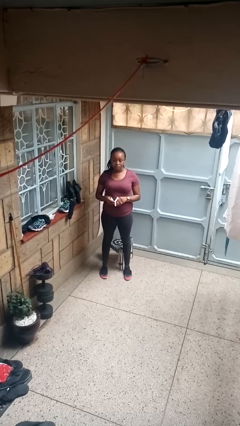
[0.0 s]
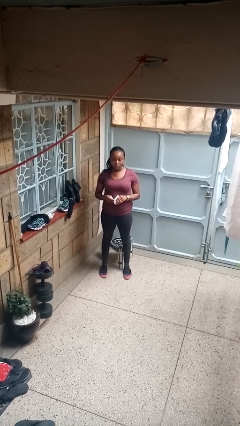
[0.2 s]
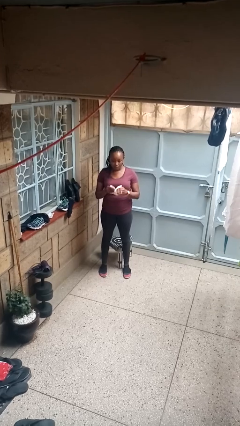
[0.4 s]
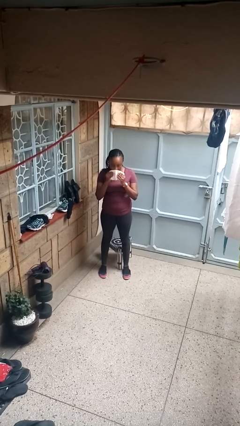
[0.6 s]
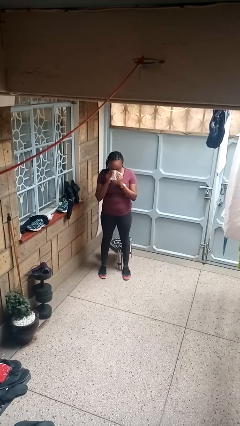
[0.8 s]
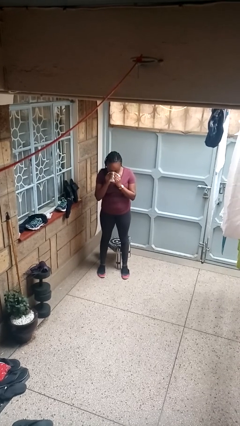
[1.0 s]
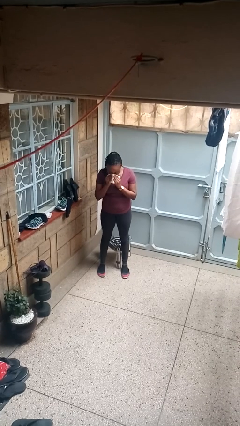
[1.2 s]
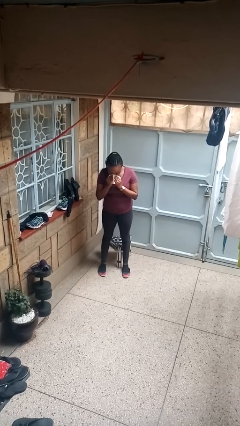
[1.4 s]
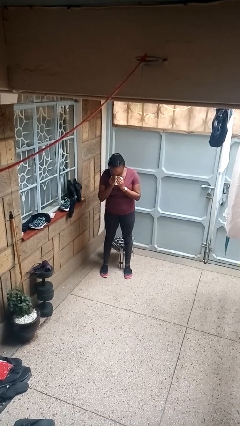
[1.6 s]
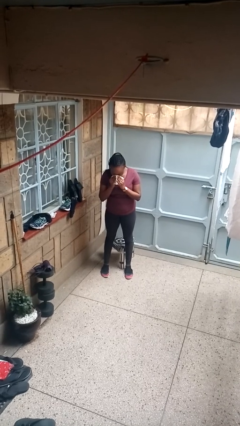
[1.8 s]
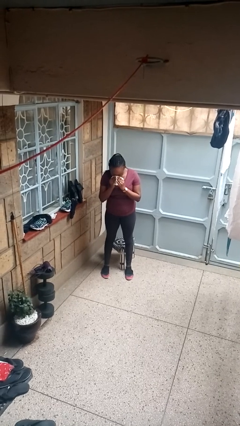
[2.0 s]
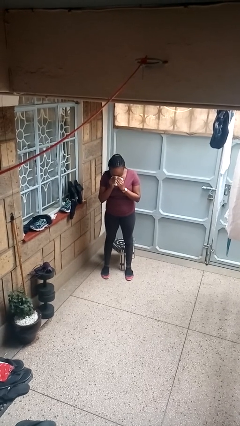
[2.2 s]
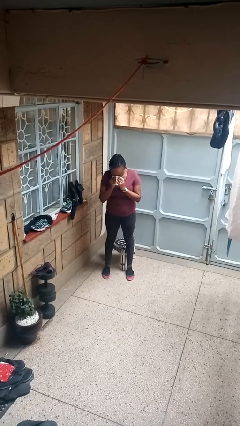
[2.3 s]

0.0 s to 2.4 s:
person blows nose

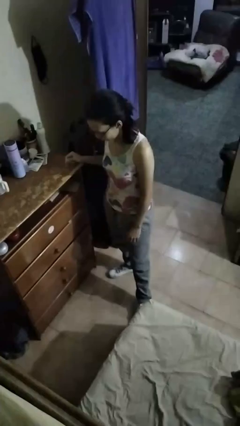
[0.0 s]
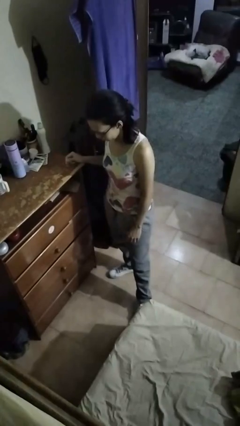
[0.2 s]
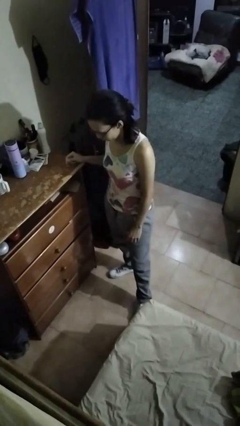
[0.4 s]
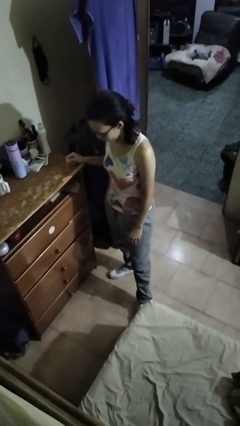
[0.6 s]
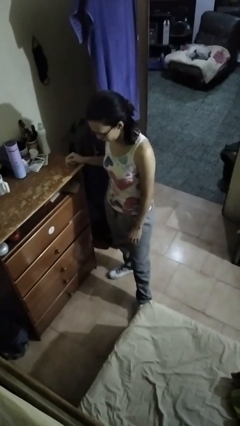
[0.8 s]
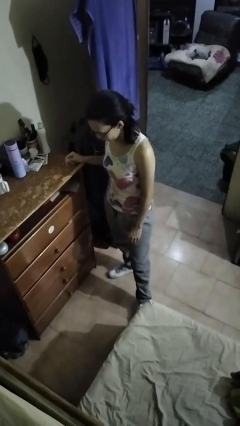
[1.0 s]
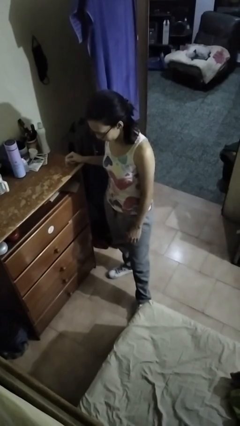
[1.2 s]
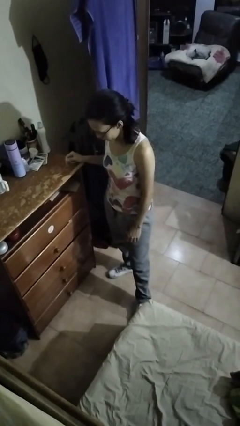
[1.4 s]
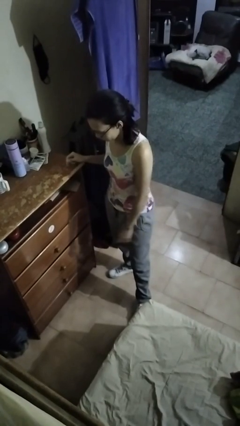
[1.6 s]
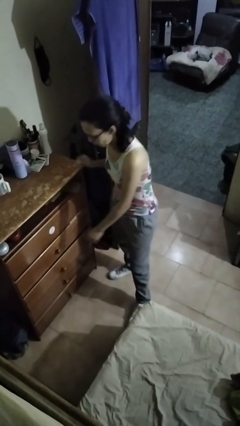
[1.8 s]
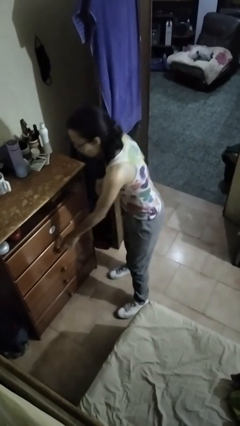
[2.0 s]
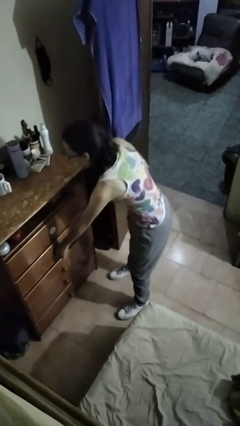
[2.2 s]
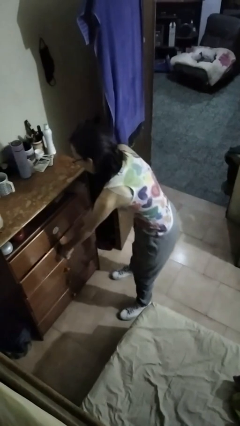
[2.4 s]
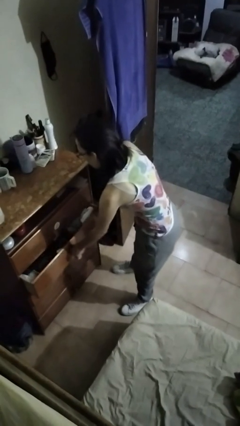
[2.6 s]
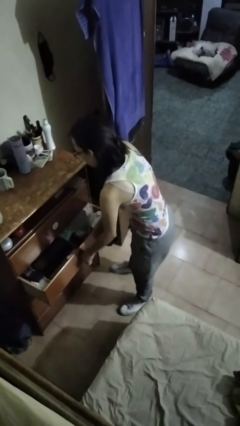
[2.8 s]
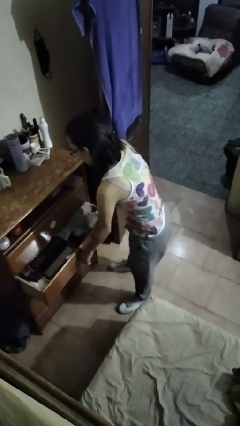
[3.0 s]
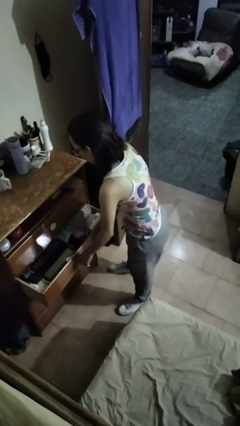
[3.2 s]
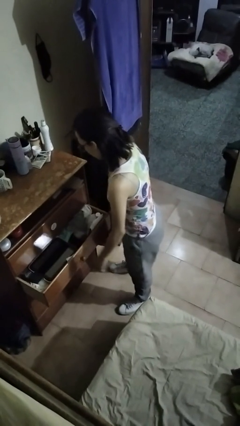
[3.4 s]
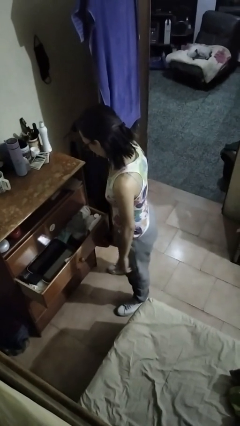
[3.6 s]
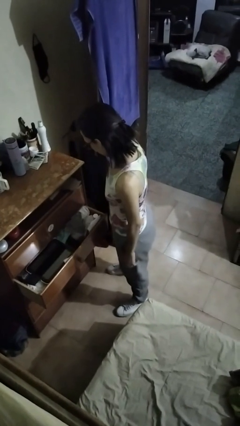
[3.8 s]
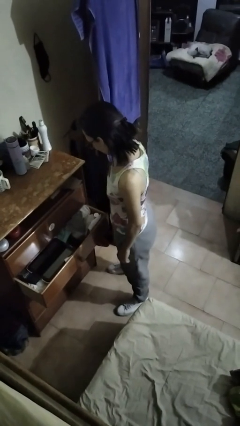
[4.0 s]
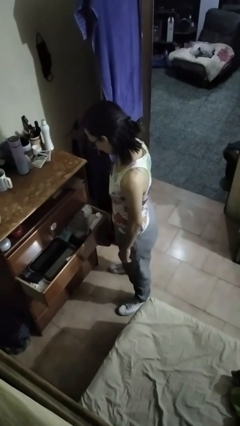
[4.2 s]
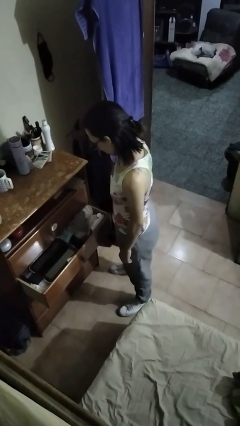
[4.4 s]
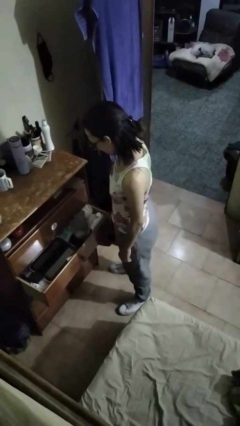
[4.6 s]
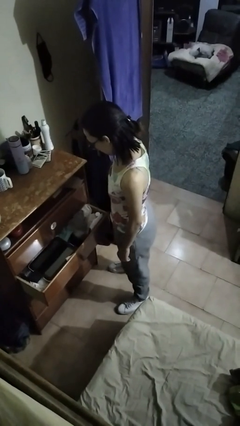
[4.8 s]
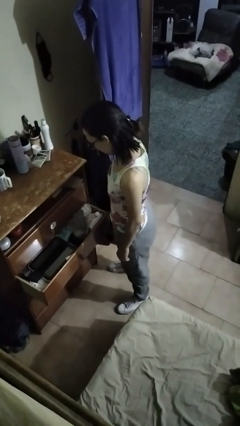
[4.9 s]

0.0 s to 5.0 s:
person opens dresser drawer

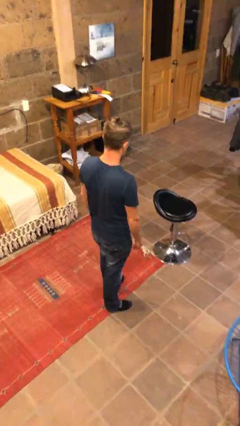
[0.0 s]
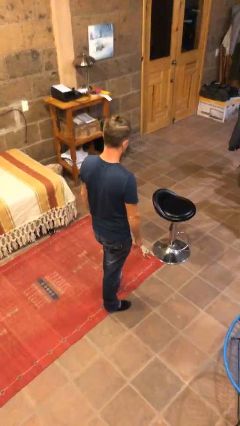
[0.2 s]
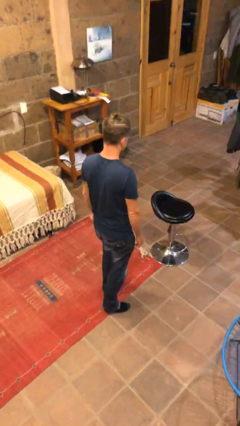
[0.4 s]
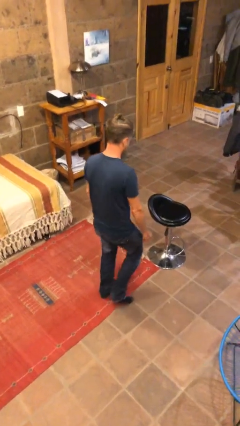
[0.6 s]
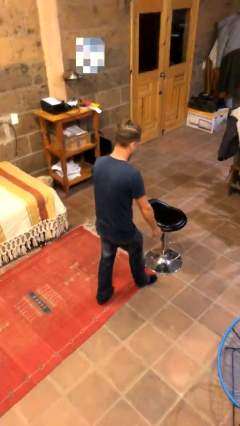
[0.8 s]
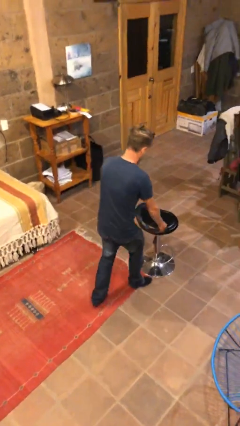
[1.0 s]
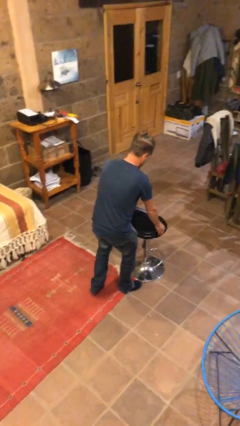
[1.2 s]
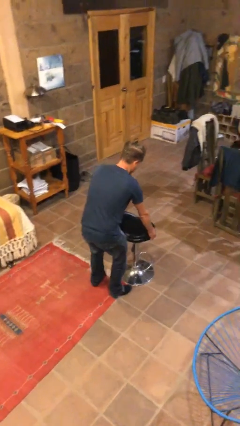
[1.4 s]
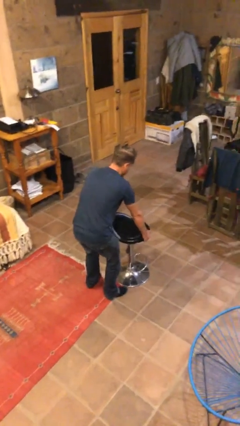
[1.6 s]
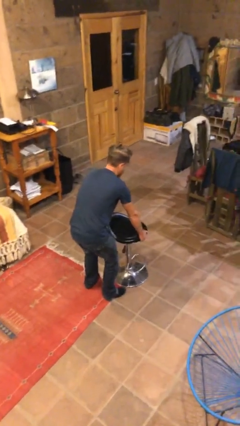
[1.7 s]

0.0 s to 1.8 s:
person picks up object from floor

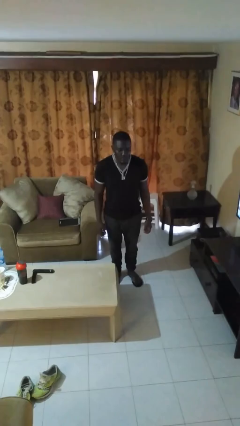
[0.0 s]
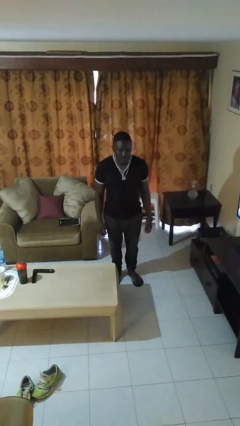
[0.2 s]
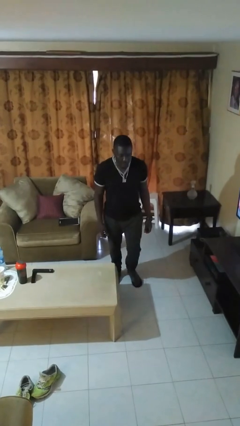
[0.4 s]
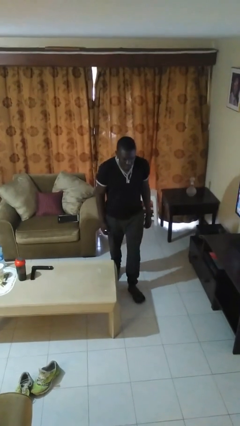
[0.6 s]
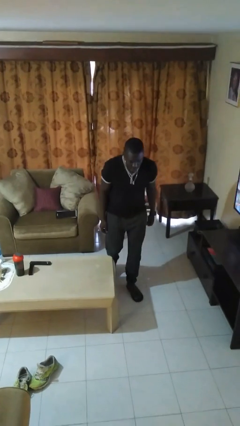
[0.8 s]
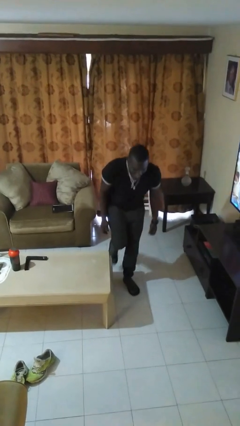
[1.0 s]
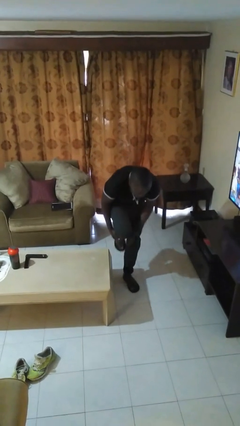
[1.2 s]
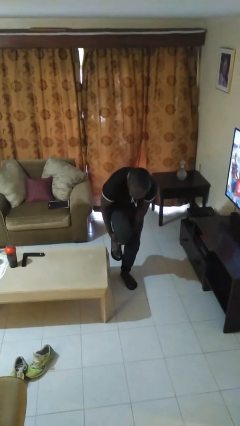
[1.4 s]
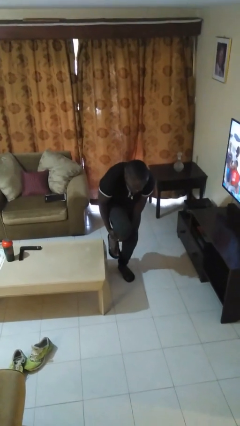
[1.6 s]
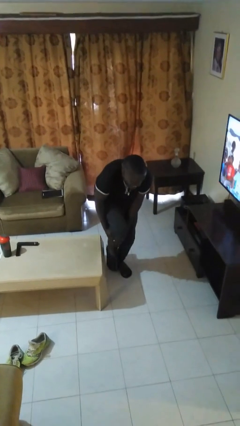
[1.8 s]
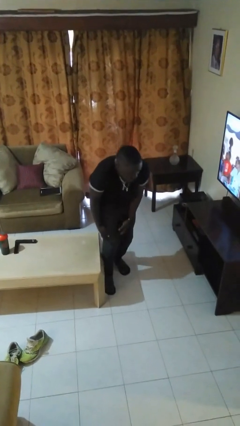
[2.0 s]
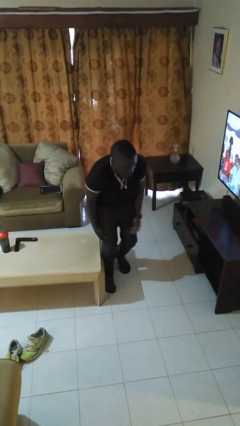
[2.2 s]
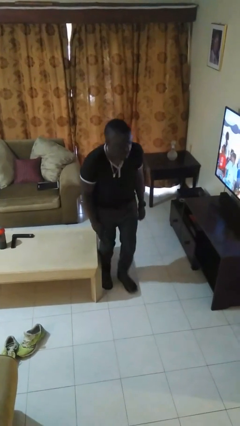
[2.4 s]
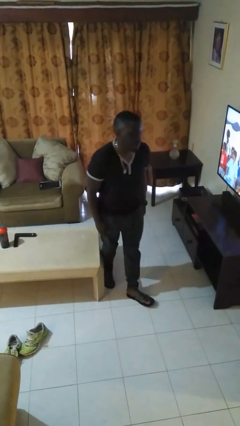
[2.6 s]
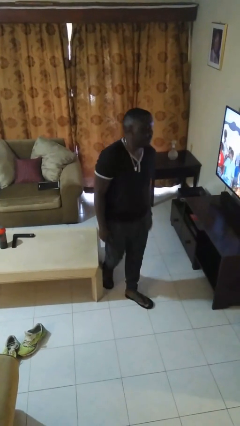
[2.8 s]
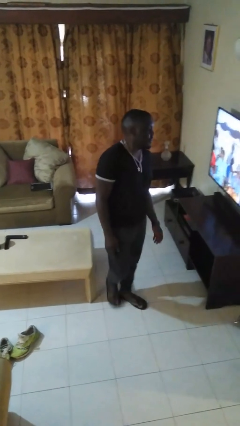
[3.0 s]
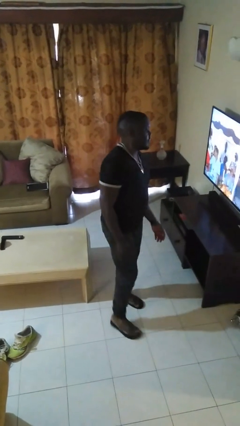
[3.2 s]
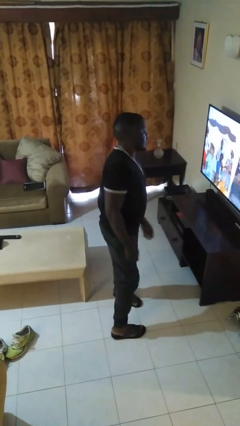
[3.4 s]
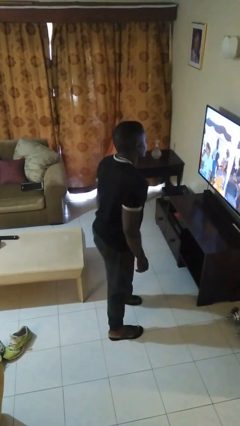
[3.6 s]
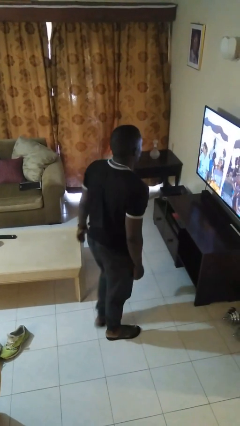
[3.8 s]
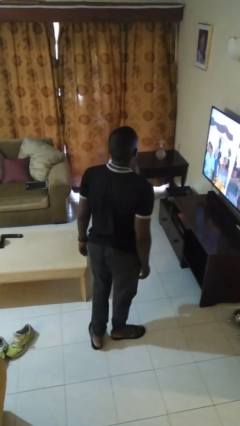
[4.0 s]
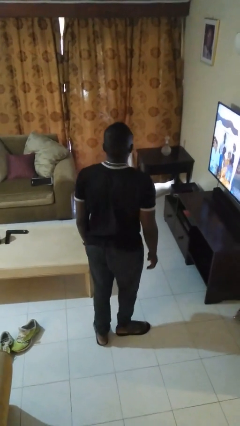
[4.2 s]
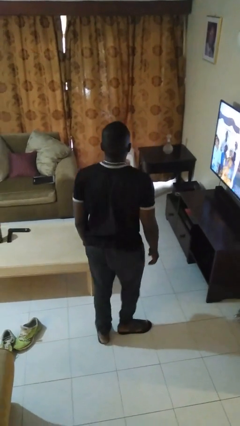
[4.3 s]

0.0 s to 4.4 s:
person bumps into table

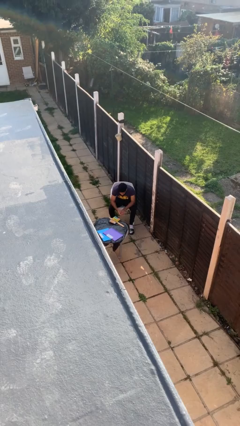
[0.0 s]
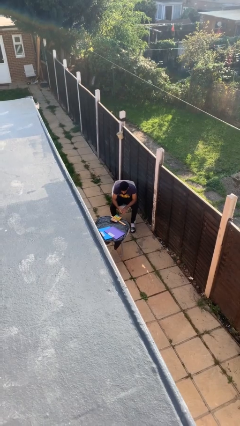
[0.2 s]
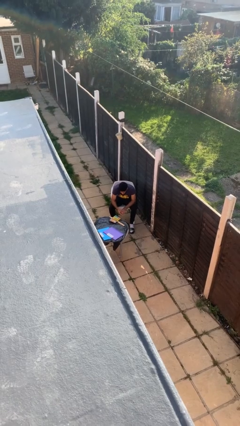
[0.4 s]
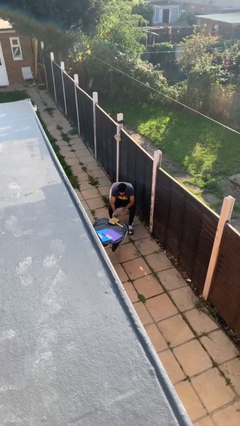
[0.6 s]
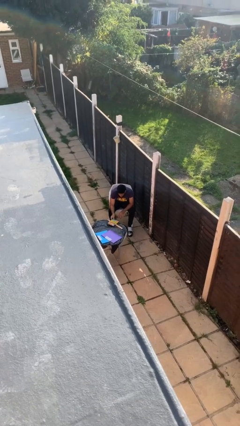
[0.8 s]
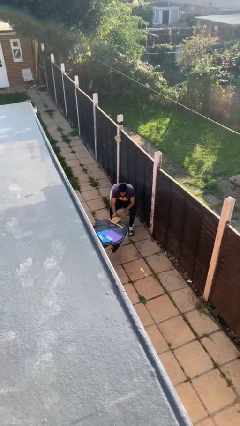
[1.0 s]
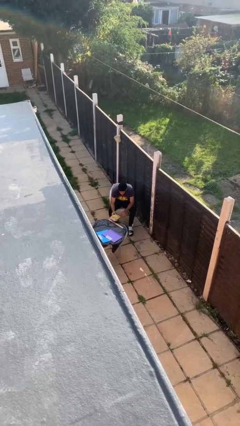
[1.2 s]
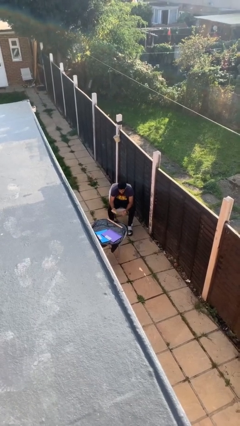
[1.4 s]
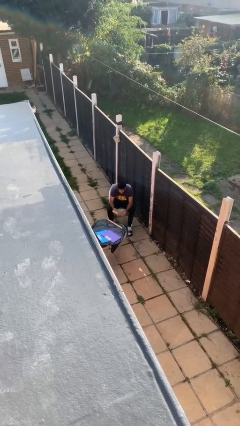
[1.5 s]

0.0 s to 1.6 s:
person picks up object from table

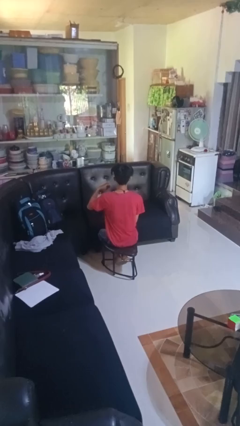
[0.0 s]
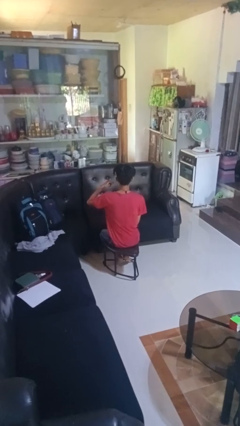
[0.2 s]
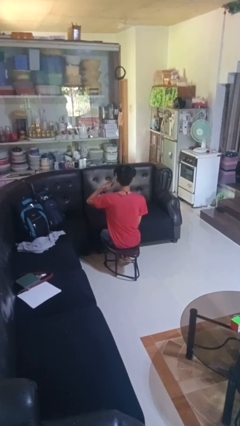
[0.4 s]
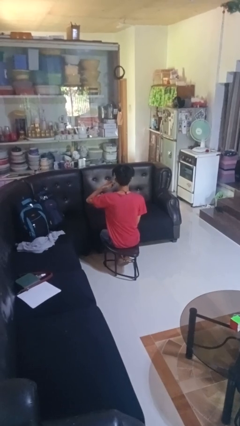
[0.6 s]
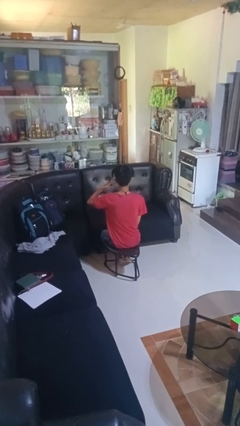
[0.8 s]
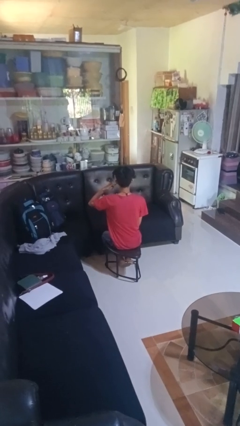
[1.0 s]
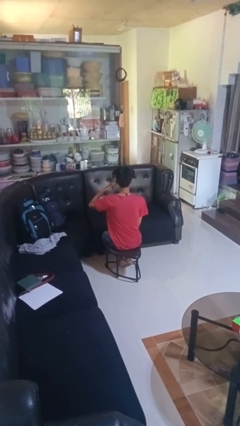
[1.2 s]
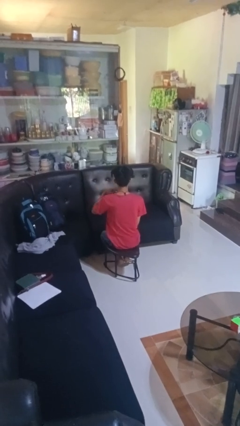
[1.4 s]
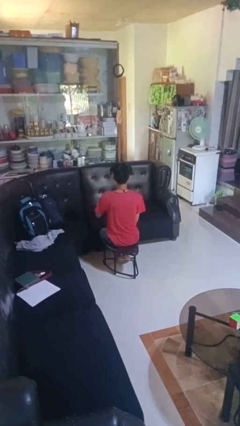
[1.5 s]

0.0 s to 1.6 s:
person gestures call me

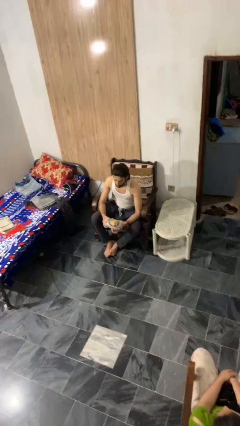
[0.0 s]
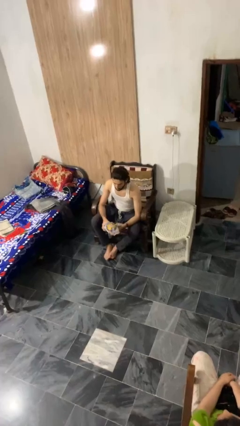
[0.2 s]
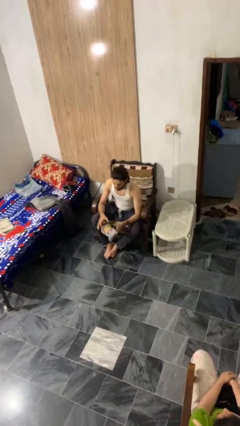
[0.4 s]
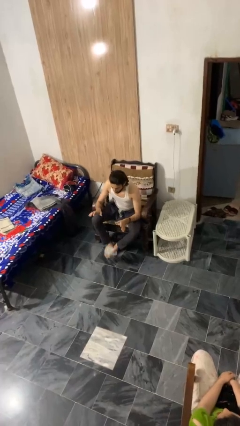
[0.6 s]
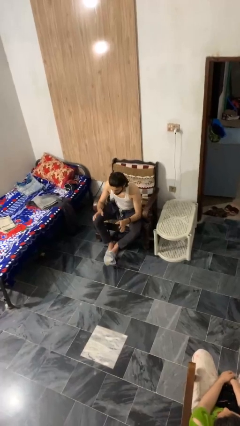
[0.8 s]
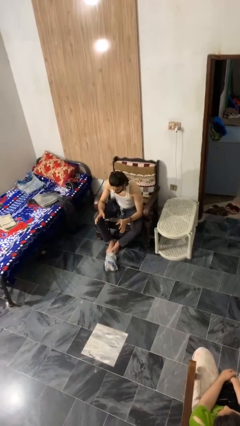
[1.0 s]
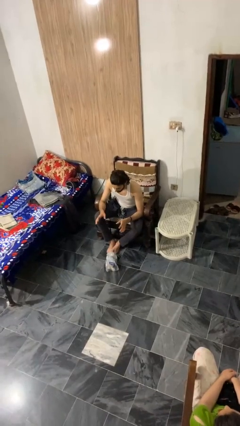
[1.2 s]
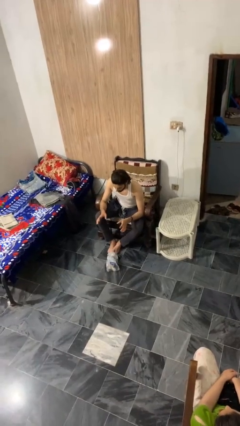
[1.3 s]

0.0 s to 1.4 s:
person drops object
